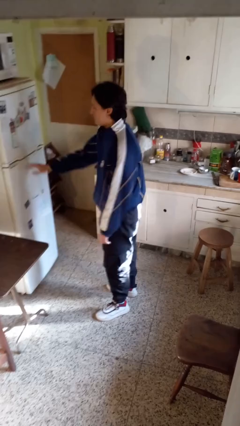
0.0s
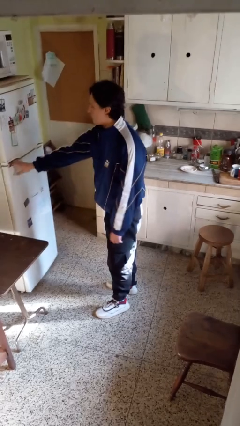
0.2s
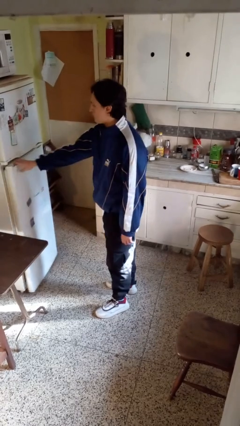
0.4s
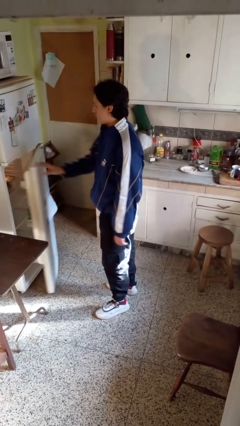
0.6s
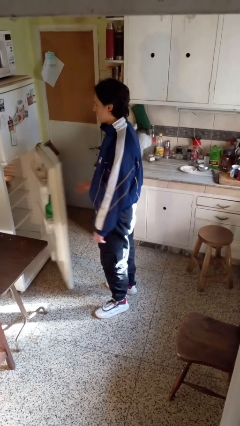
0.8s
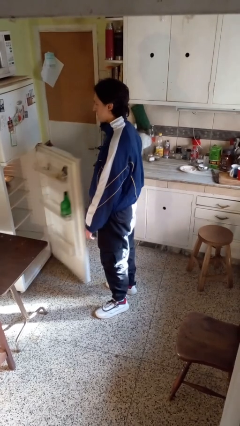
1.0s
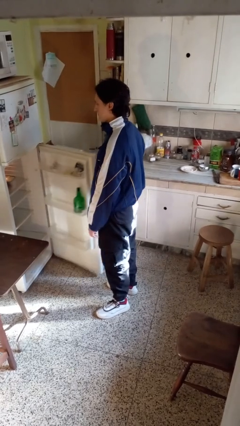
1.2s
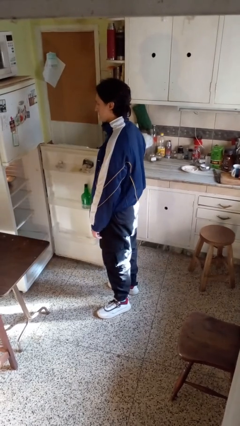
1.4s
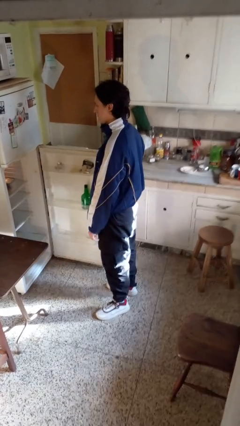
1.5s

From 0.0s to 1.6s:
person opens refrigerator

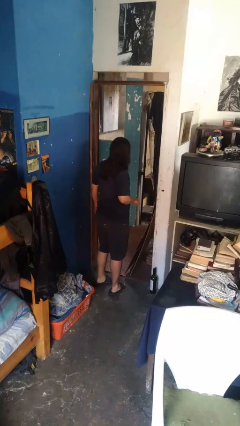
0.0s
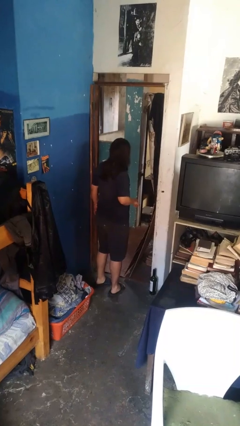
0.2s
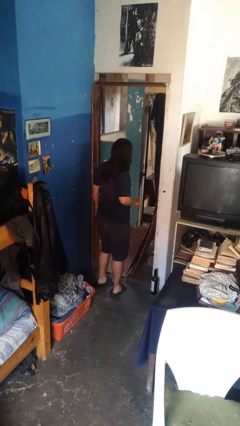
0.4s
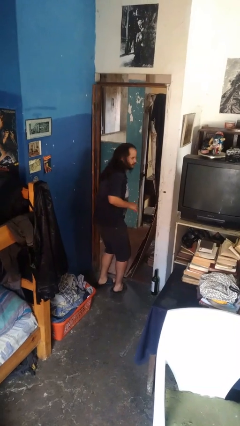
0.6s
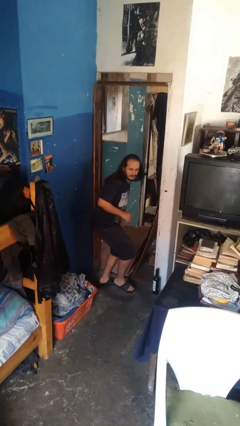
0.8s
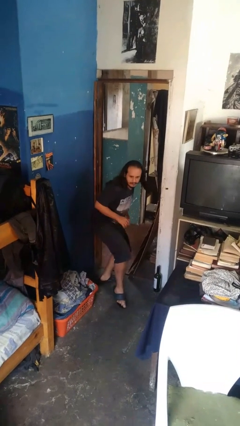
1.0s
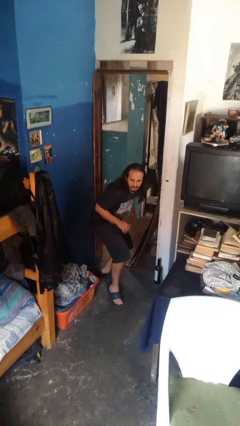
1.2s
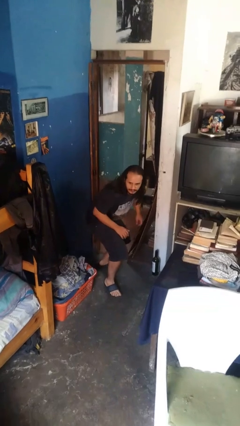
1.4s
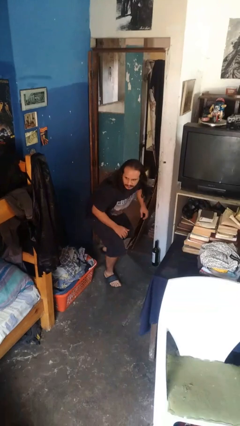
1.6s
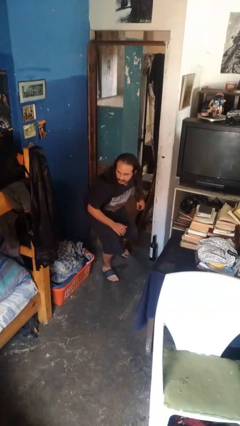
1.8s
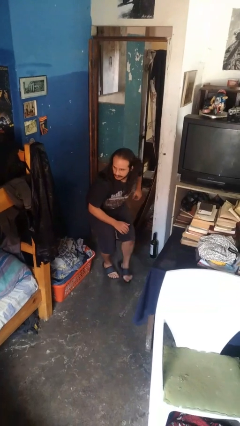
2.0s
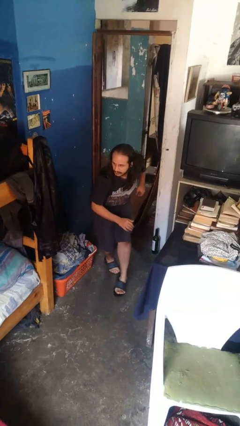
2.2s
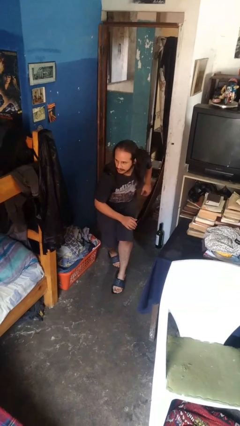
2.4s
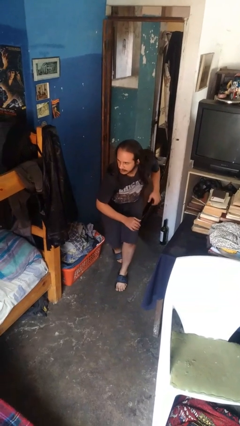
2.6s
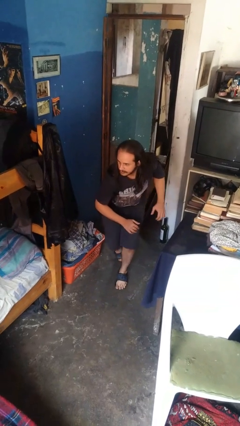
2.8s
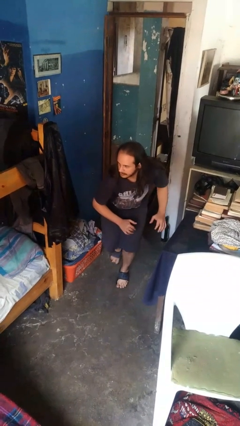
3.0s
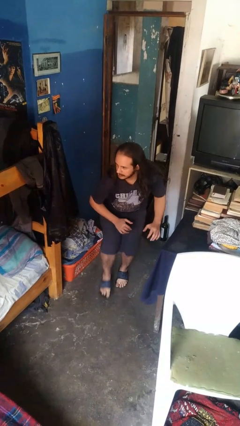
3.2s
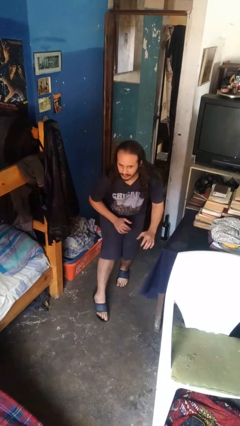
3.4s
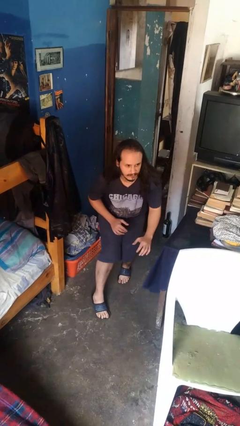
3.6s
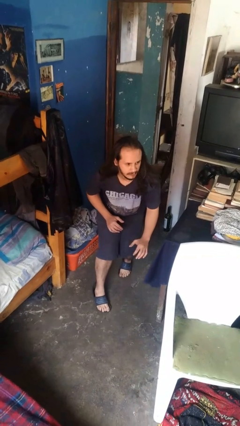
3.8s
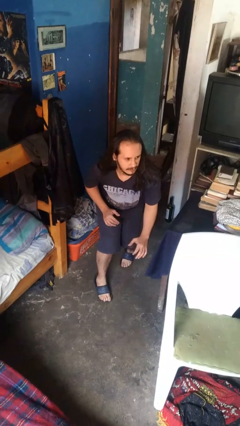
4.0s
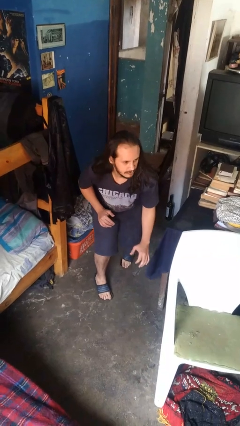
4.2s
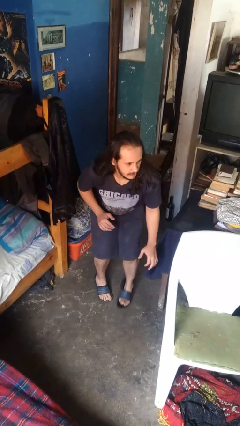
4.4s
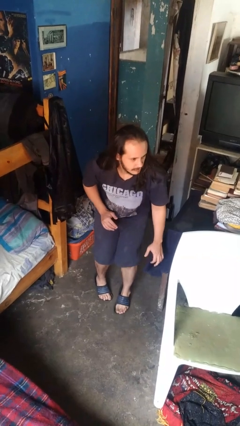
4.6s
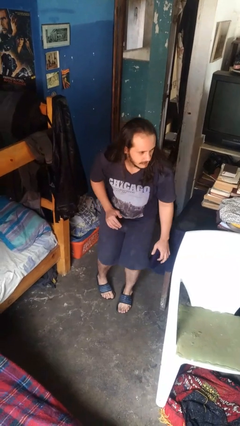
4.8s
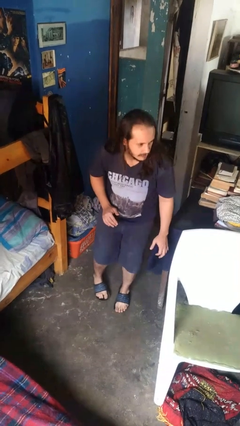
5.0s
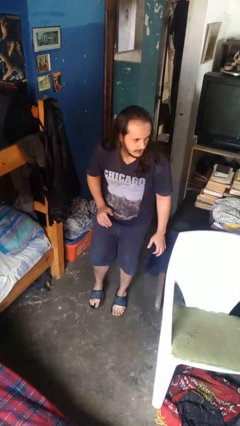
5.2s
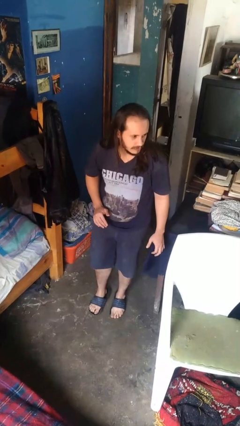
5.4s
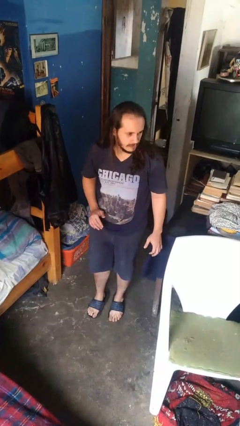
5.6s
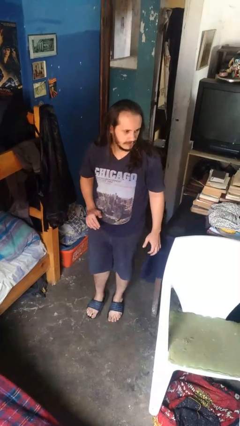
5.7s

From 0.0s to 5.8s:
person walks tiptoe

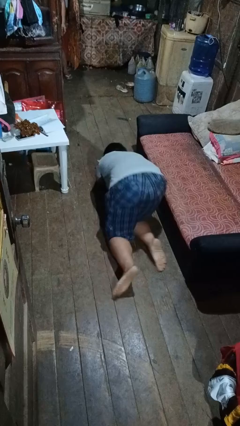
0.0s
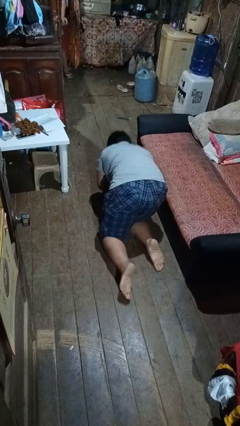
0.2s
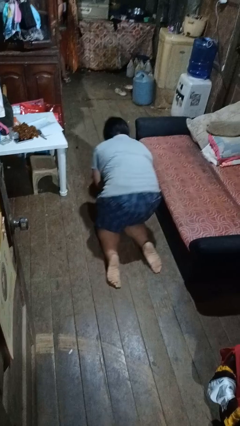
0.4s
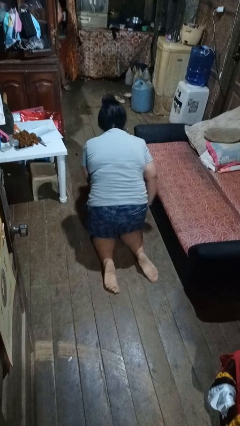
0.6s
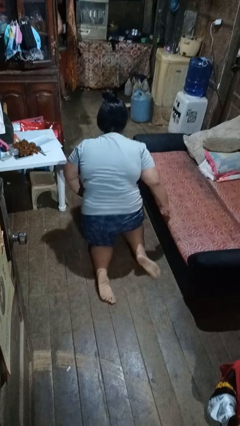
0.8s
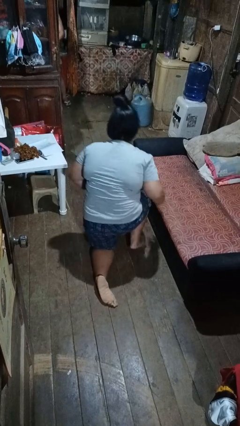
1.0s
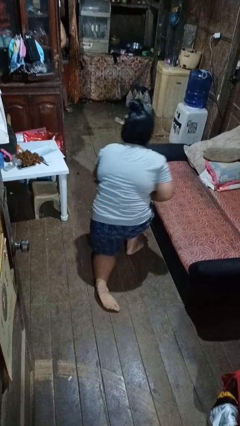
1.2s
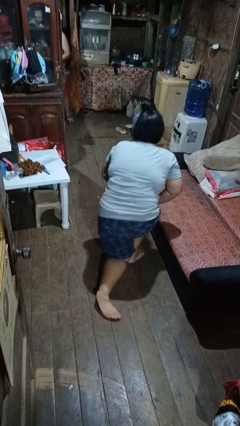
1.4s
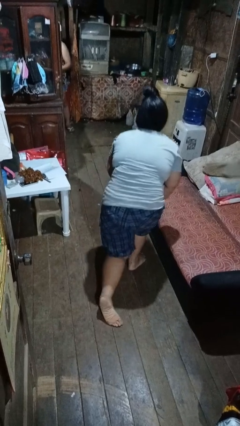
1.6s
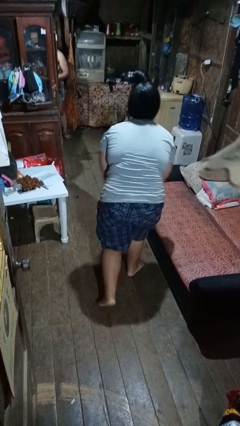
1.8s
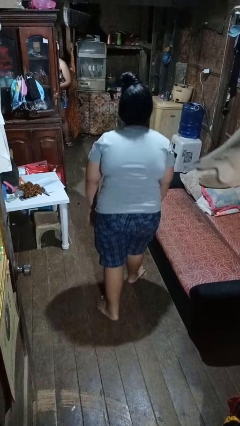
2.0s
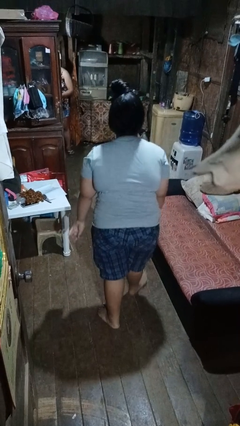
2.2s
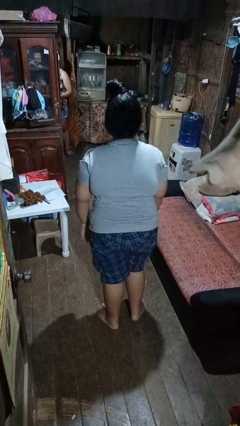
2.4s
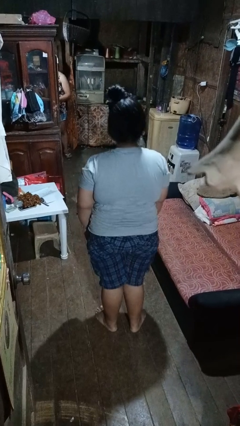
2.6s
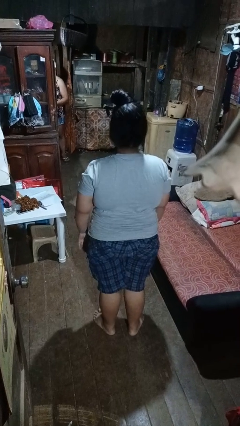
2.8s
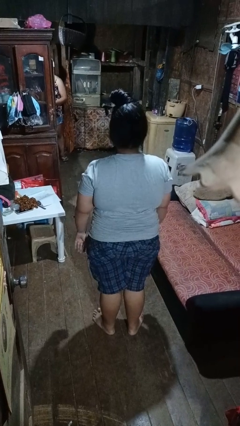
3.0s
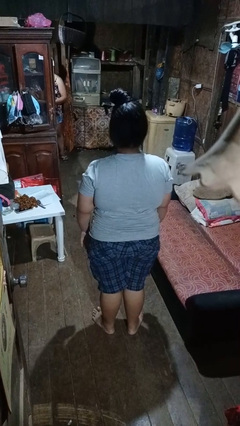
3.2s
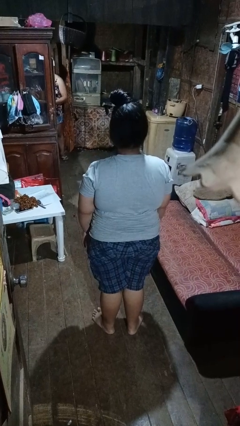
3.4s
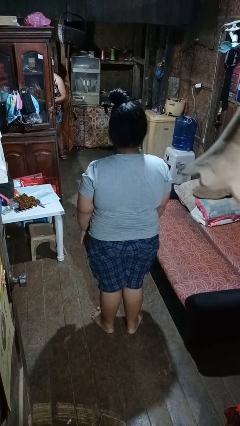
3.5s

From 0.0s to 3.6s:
person stands up from floor

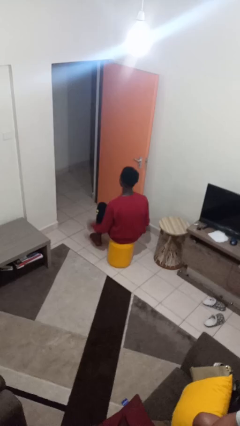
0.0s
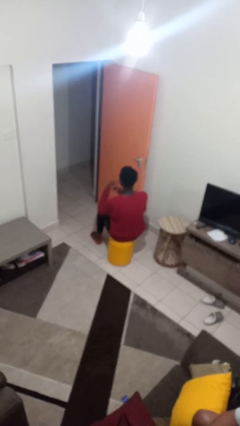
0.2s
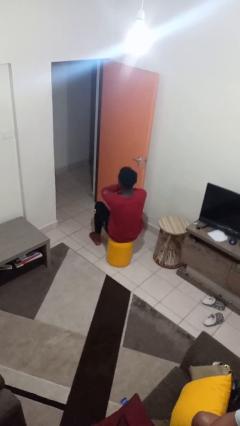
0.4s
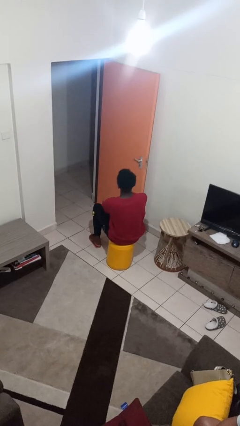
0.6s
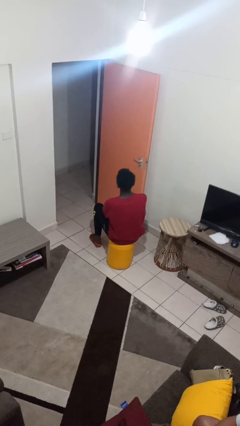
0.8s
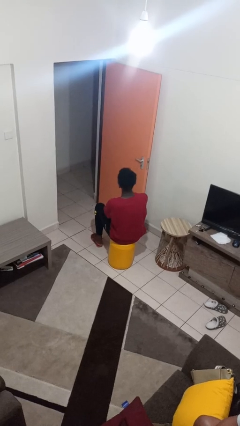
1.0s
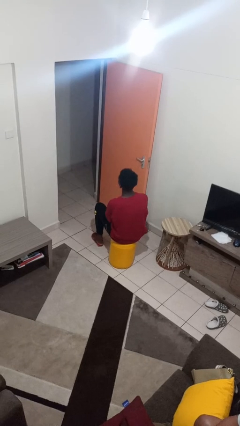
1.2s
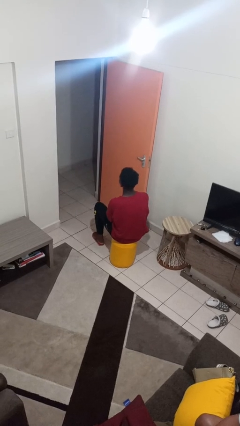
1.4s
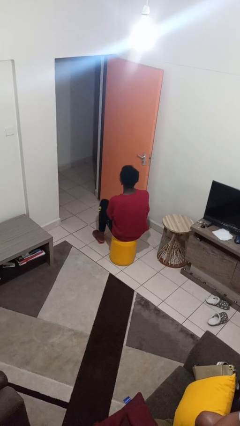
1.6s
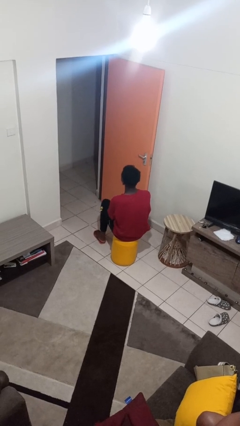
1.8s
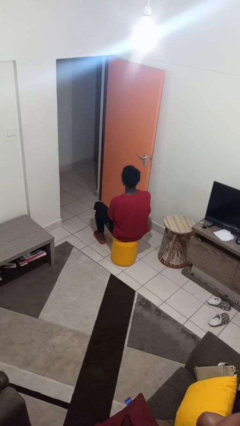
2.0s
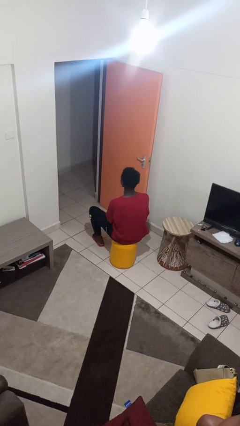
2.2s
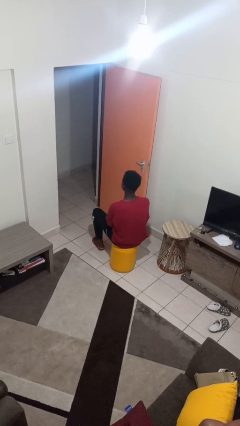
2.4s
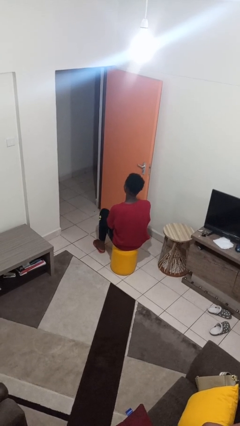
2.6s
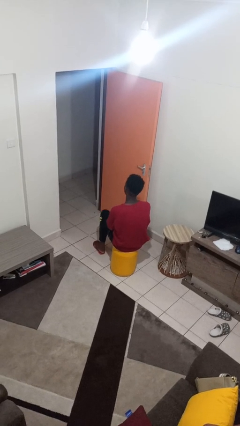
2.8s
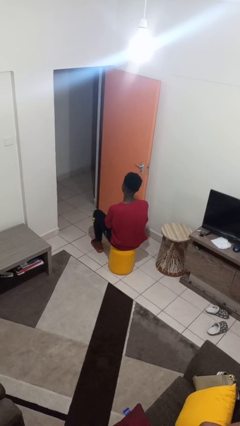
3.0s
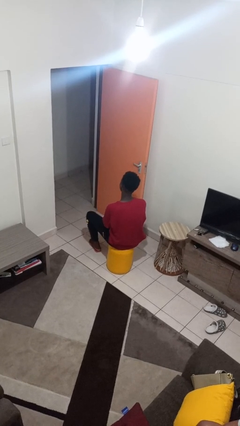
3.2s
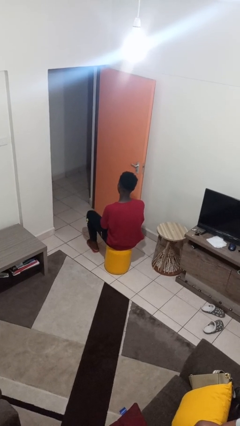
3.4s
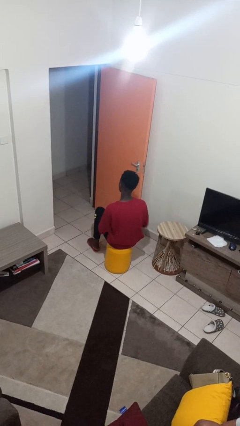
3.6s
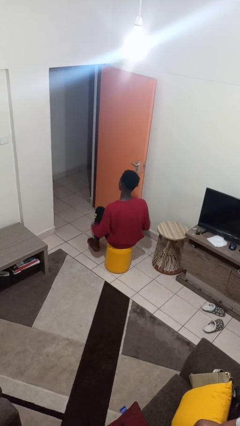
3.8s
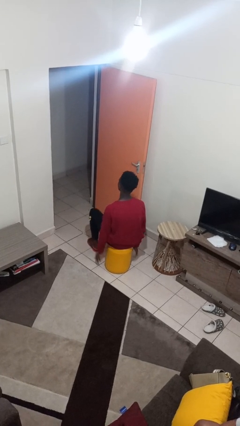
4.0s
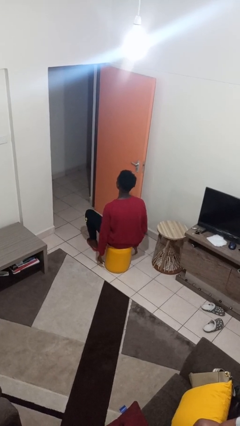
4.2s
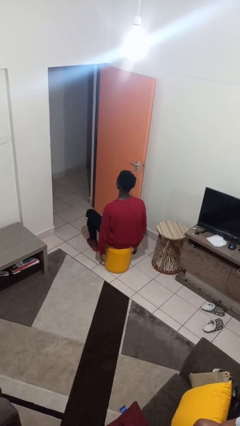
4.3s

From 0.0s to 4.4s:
person crosses arms

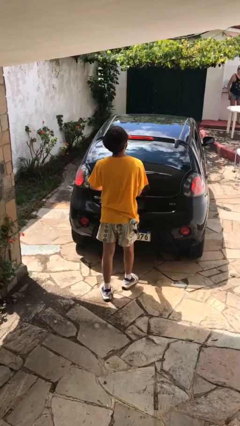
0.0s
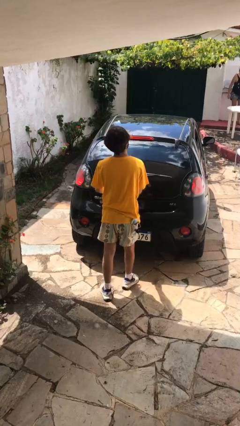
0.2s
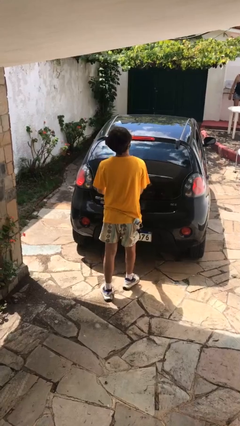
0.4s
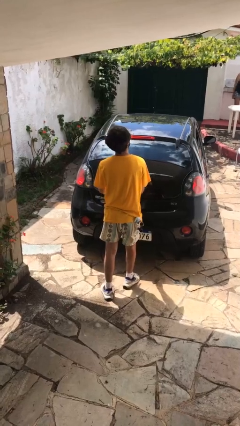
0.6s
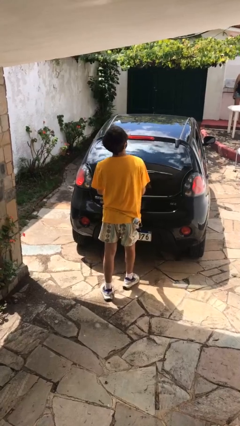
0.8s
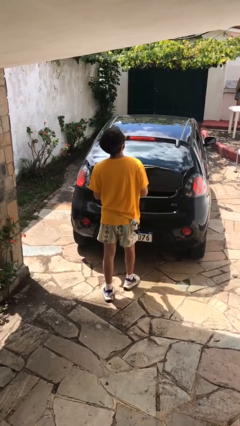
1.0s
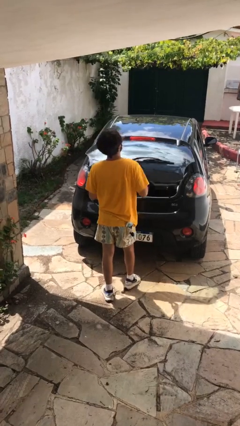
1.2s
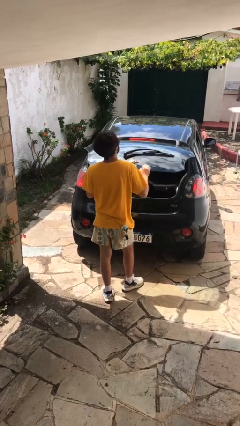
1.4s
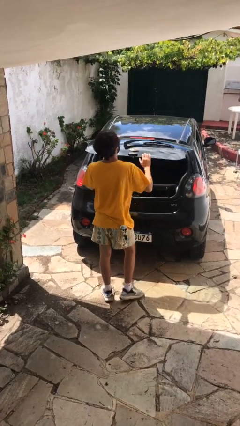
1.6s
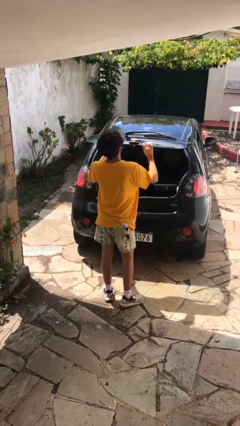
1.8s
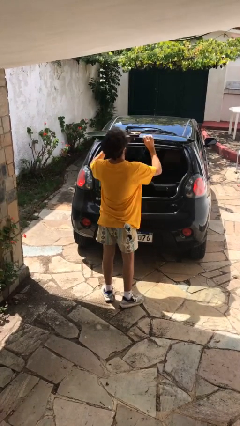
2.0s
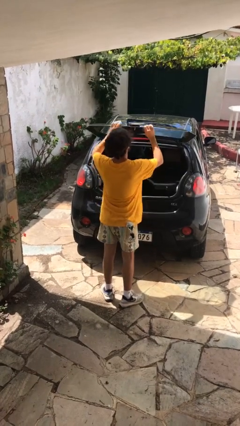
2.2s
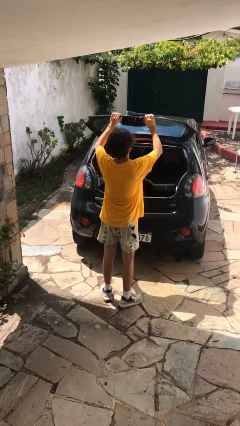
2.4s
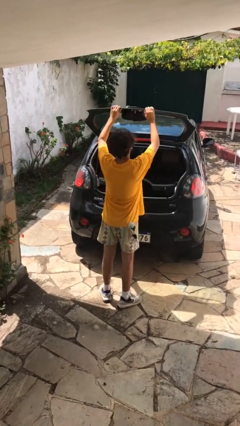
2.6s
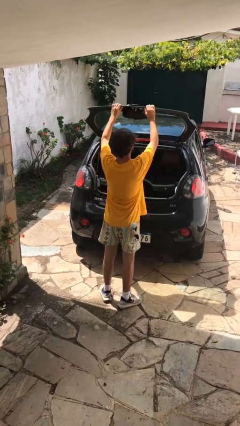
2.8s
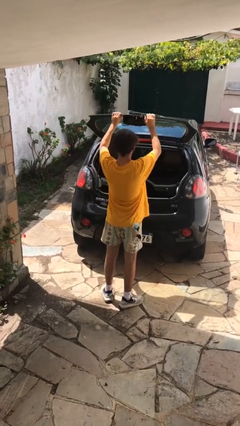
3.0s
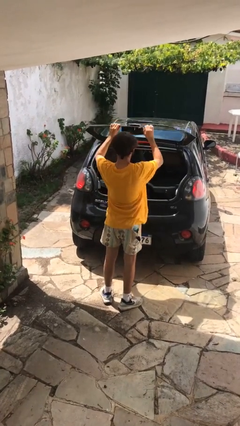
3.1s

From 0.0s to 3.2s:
person opens car trunk
